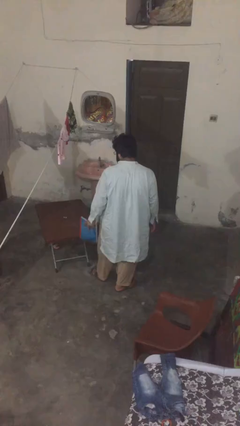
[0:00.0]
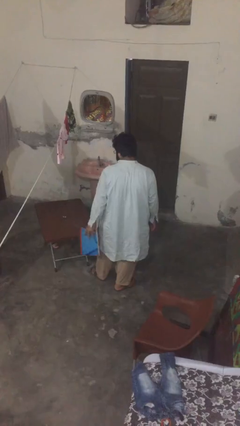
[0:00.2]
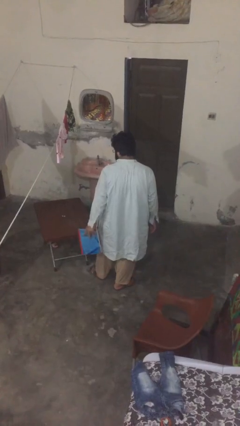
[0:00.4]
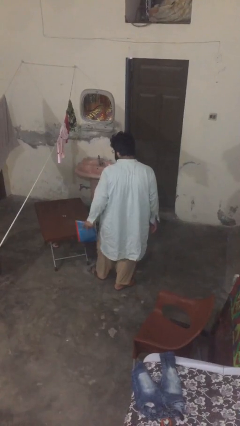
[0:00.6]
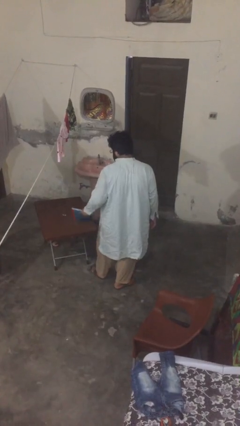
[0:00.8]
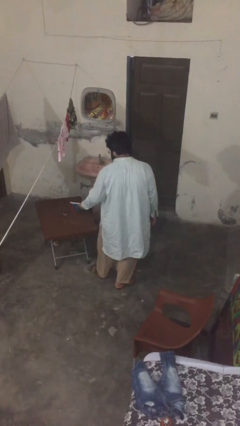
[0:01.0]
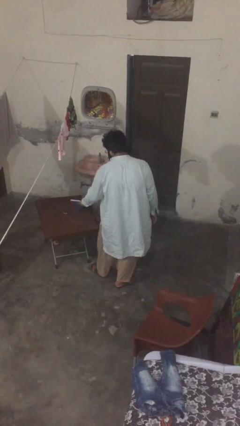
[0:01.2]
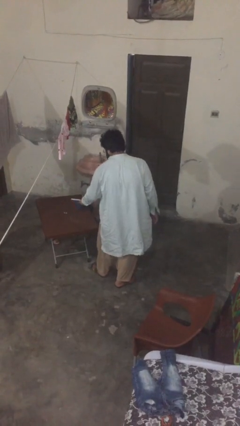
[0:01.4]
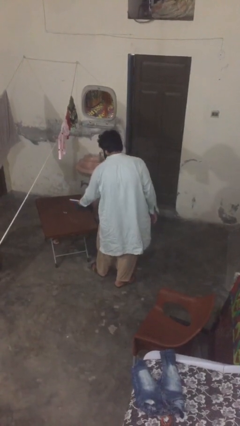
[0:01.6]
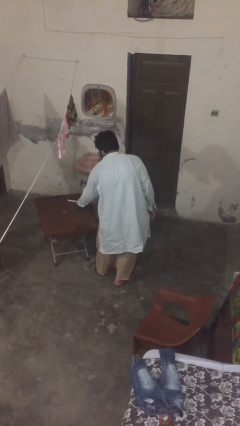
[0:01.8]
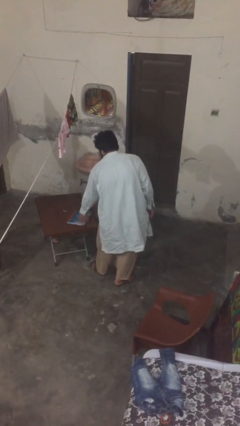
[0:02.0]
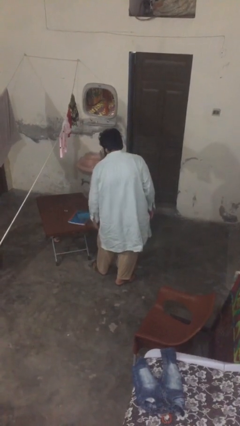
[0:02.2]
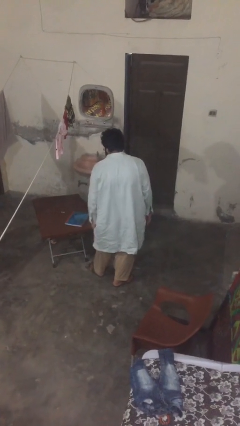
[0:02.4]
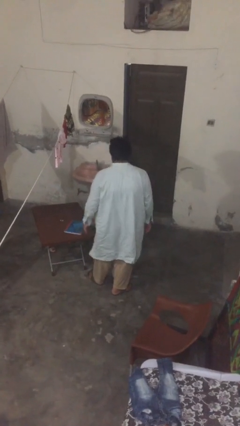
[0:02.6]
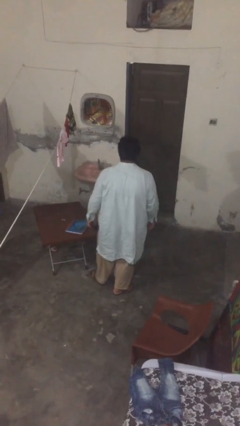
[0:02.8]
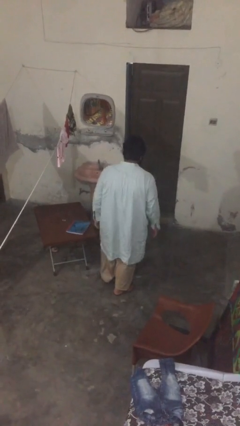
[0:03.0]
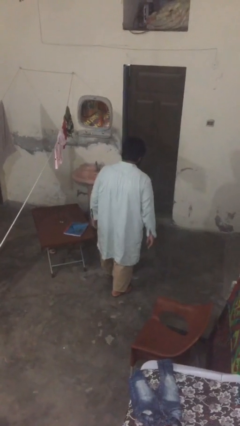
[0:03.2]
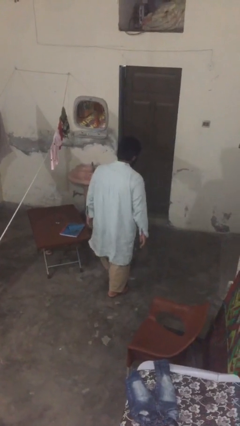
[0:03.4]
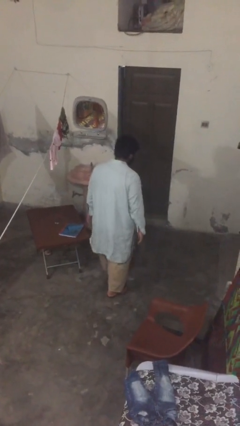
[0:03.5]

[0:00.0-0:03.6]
person puts down object on table

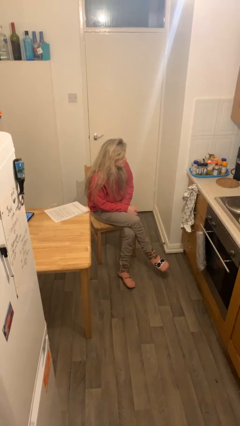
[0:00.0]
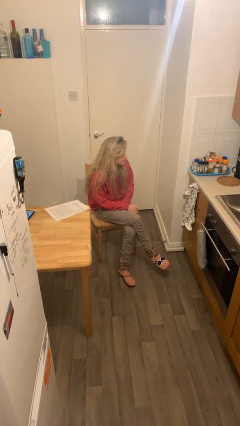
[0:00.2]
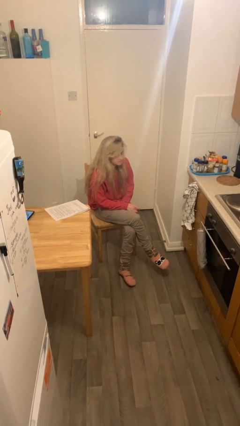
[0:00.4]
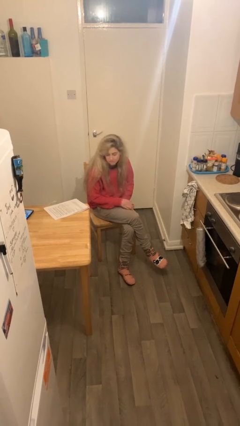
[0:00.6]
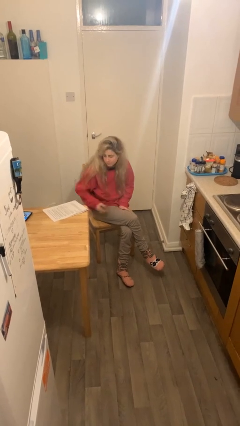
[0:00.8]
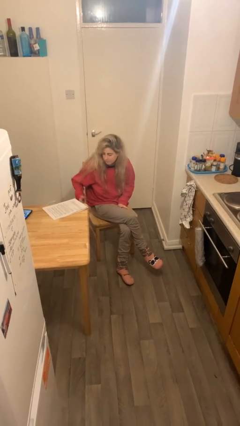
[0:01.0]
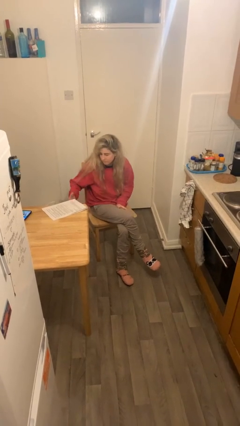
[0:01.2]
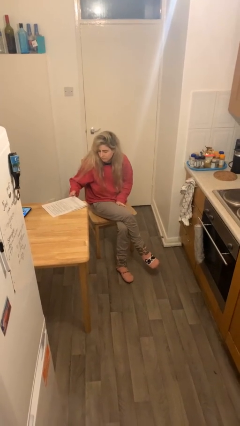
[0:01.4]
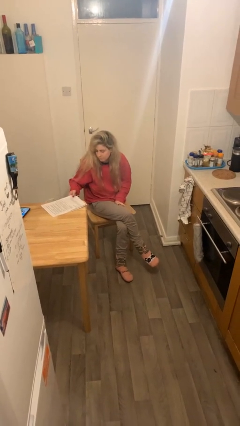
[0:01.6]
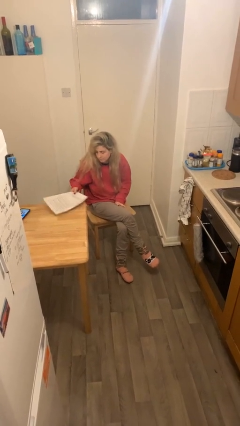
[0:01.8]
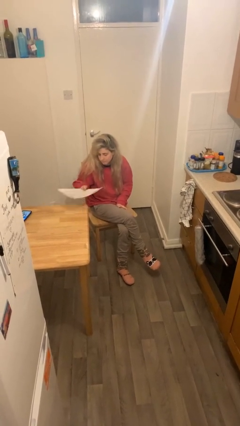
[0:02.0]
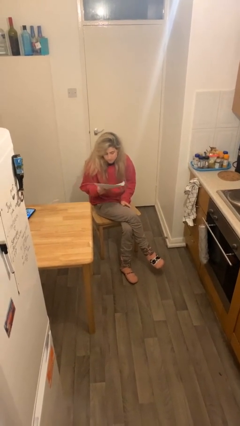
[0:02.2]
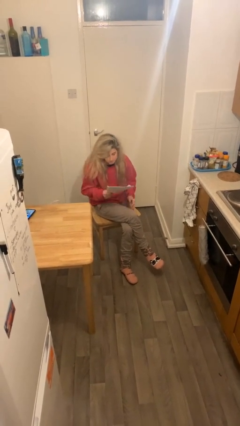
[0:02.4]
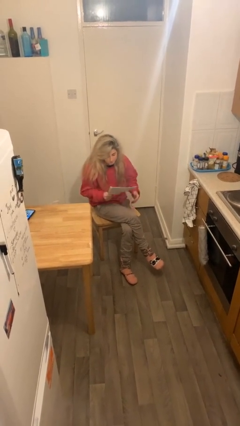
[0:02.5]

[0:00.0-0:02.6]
person picks up object from table

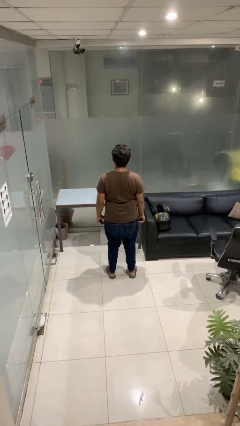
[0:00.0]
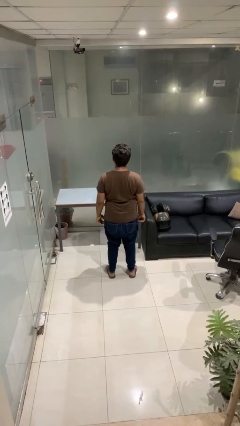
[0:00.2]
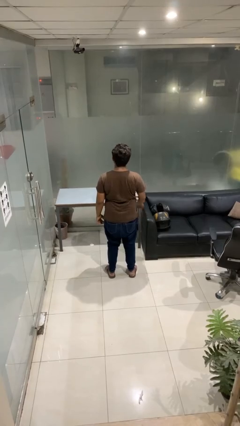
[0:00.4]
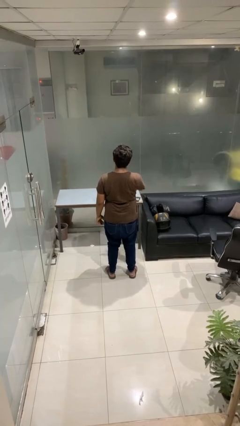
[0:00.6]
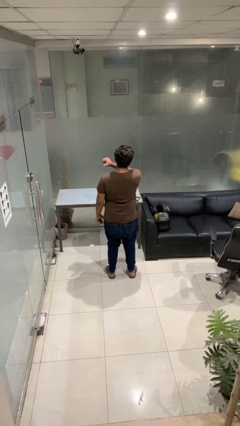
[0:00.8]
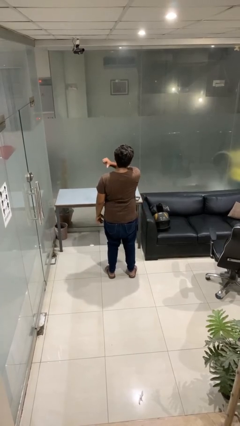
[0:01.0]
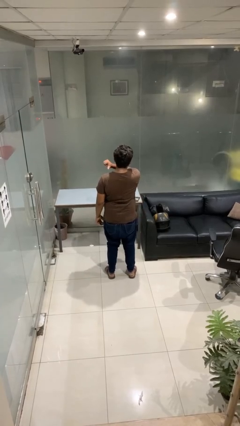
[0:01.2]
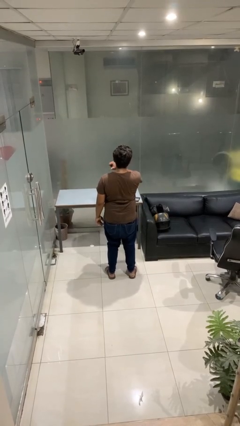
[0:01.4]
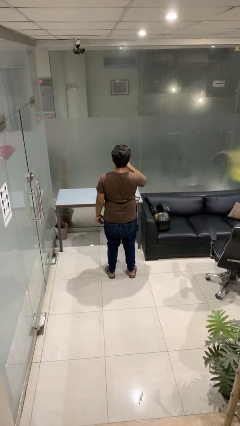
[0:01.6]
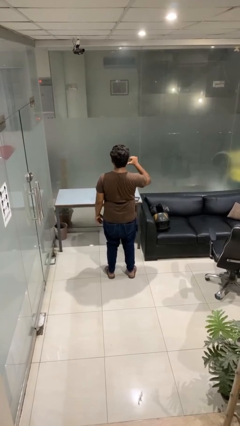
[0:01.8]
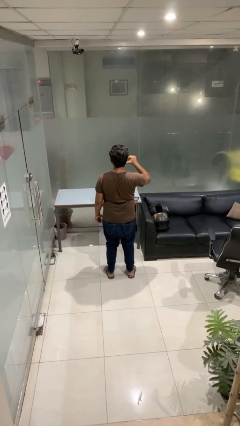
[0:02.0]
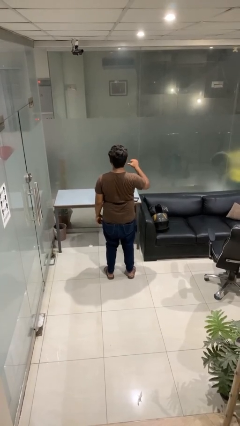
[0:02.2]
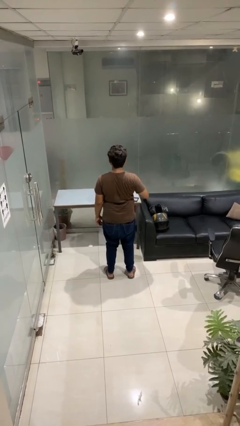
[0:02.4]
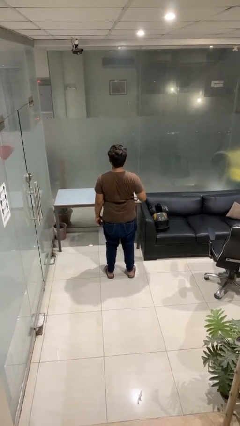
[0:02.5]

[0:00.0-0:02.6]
person gestures cut

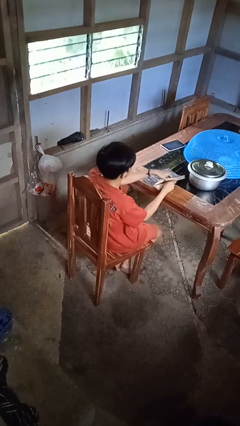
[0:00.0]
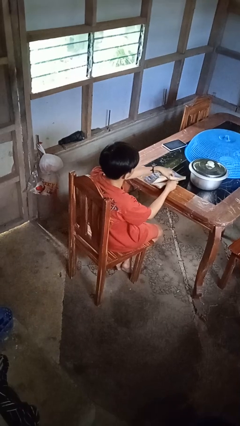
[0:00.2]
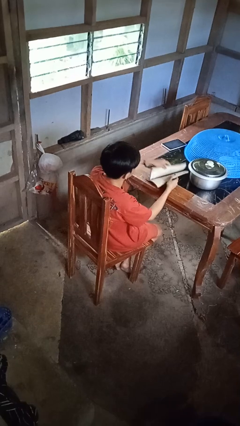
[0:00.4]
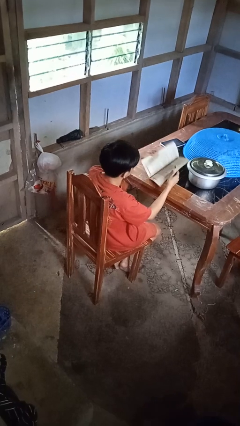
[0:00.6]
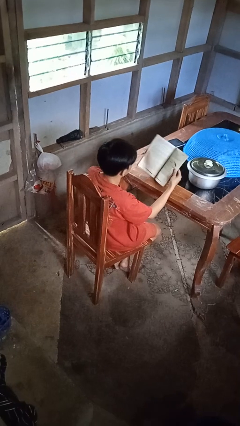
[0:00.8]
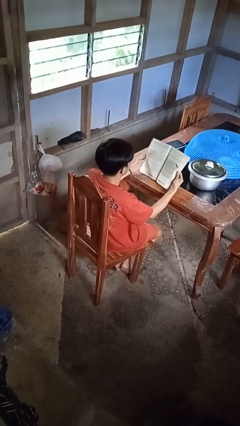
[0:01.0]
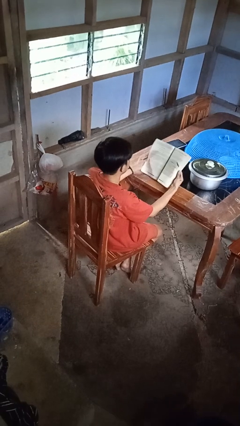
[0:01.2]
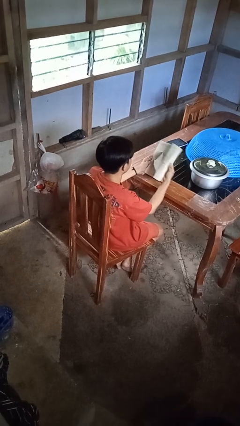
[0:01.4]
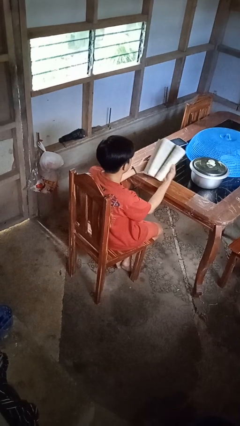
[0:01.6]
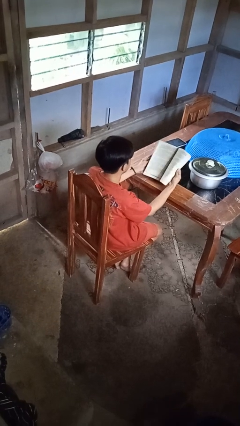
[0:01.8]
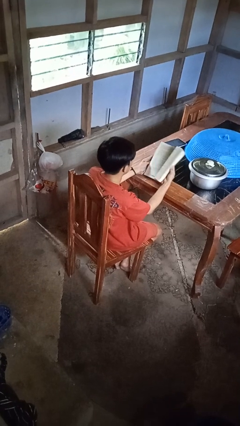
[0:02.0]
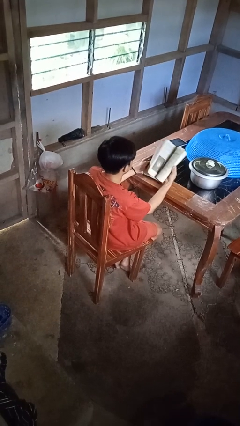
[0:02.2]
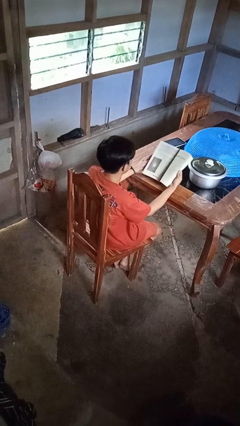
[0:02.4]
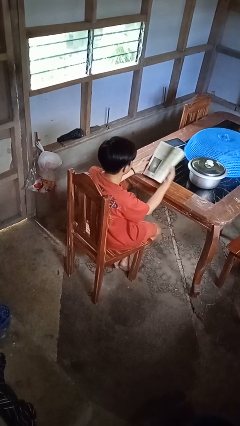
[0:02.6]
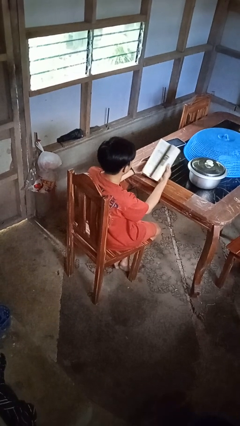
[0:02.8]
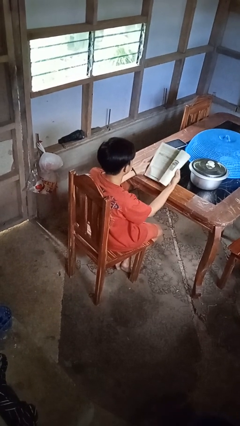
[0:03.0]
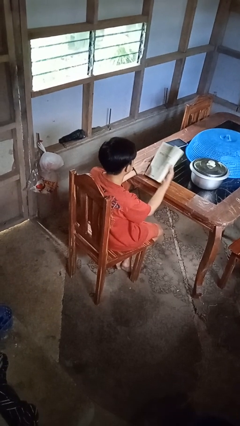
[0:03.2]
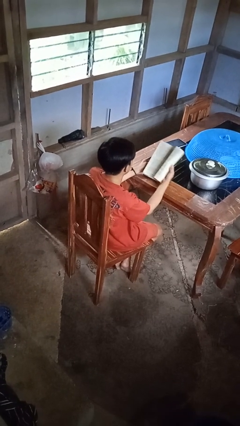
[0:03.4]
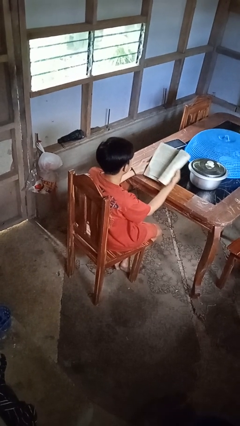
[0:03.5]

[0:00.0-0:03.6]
person reads book

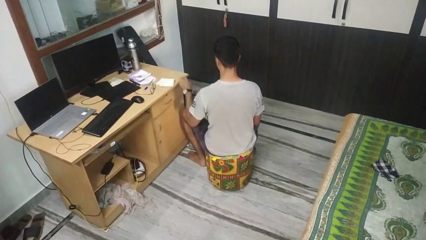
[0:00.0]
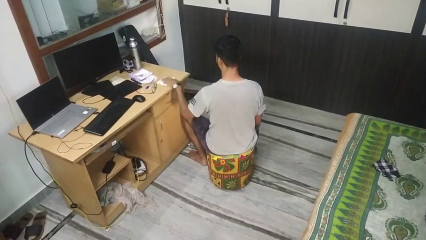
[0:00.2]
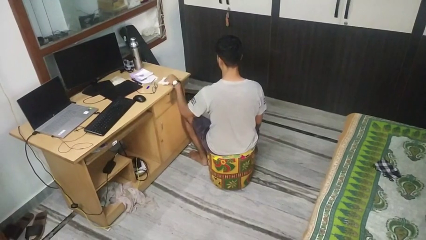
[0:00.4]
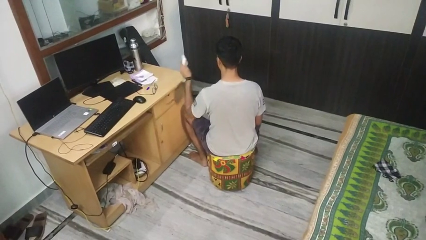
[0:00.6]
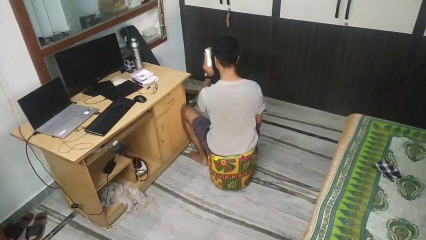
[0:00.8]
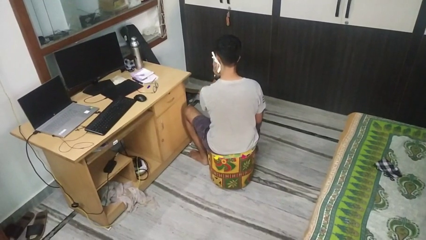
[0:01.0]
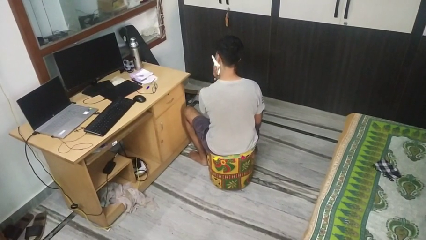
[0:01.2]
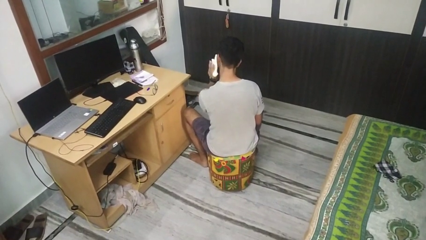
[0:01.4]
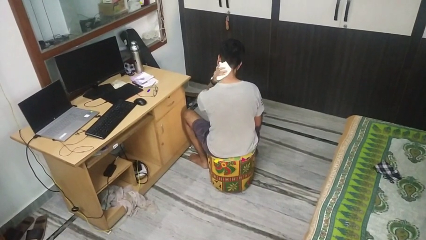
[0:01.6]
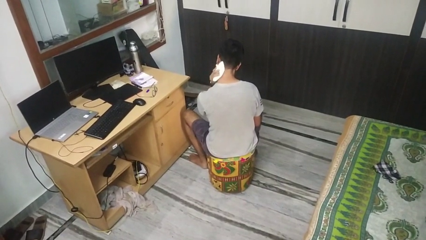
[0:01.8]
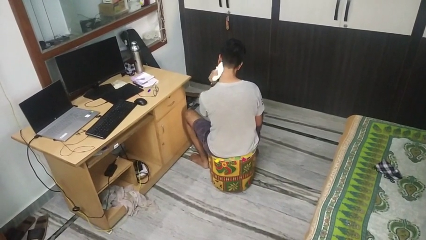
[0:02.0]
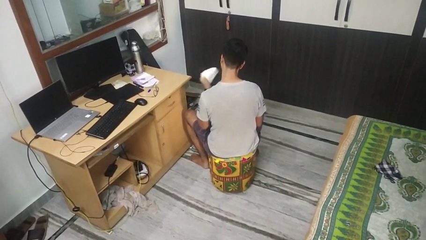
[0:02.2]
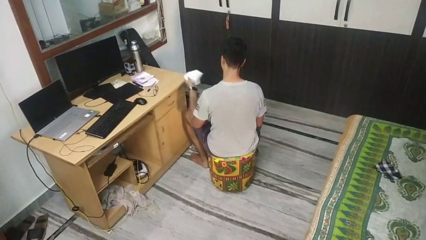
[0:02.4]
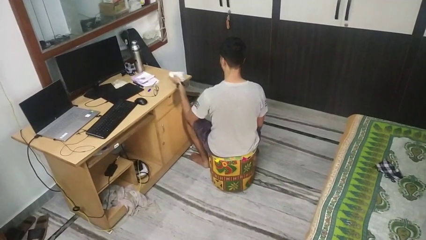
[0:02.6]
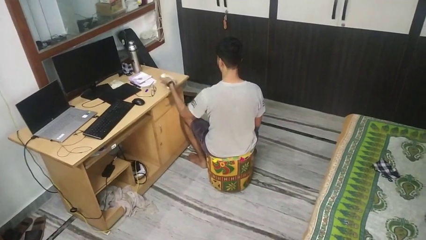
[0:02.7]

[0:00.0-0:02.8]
person wipes mouth with napkin

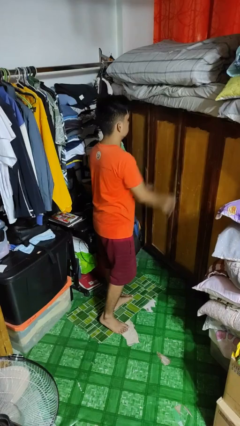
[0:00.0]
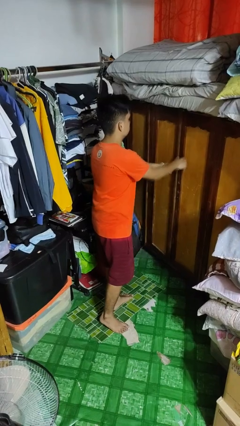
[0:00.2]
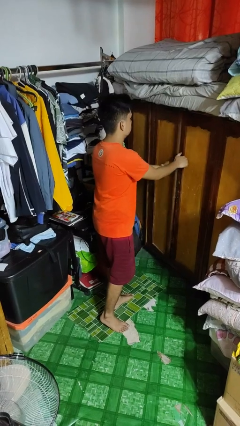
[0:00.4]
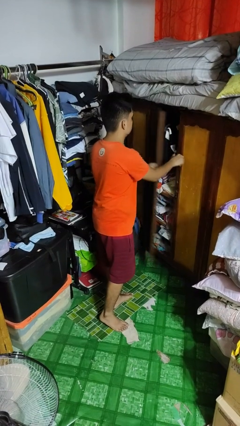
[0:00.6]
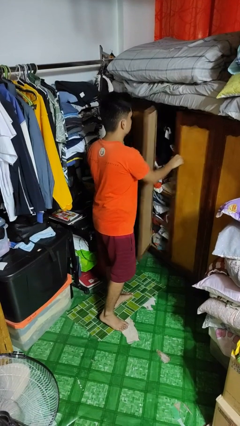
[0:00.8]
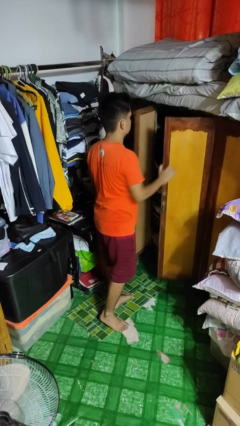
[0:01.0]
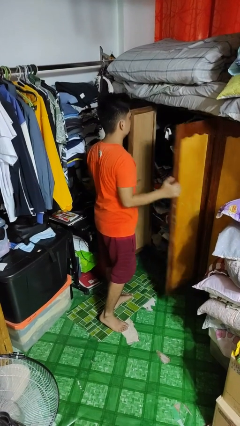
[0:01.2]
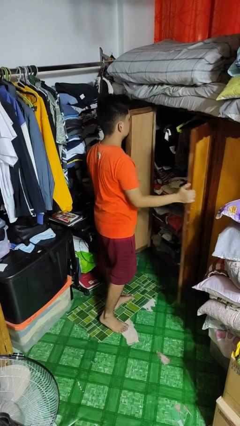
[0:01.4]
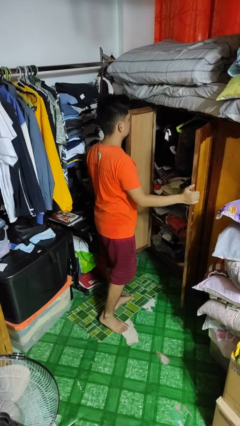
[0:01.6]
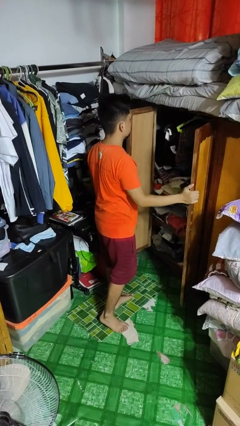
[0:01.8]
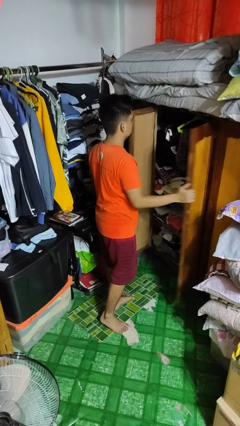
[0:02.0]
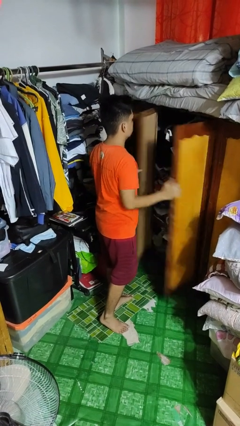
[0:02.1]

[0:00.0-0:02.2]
person opens closet door
